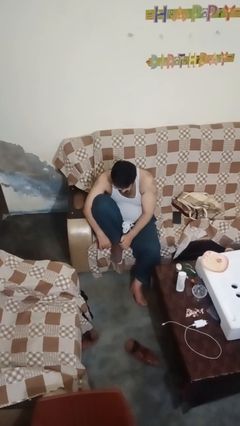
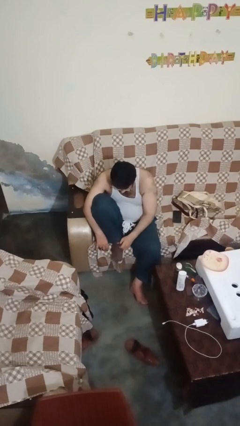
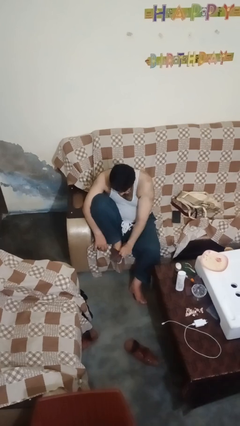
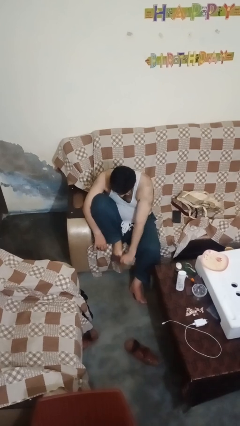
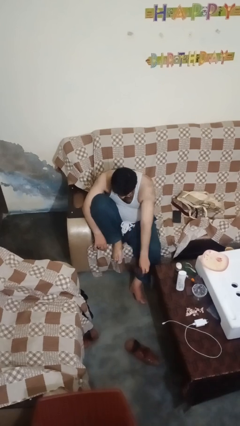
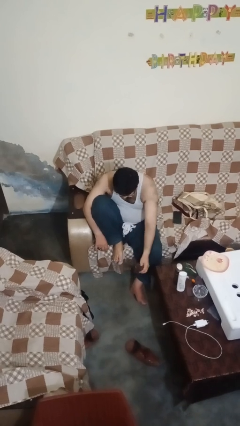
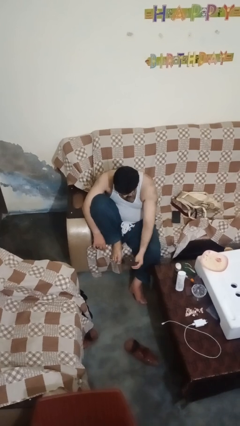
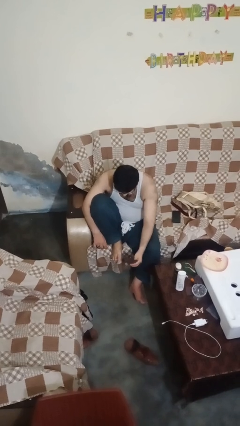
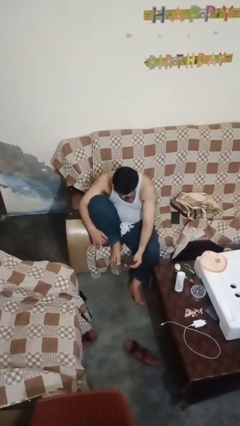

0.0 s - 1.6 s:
person takes off socks

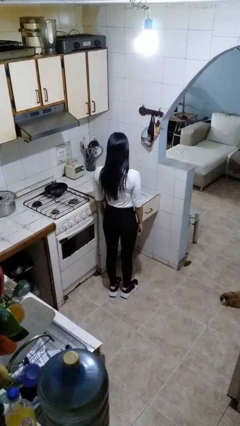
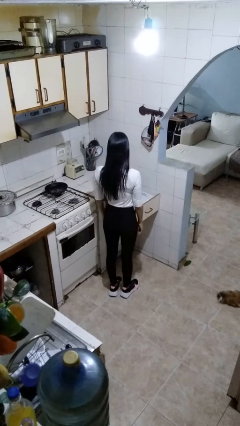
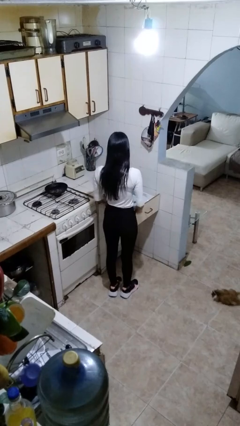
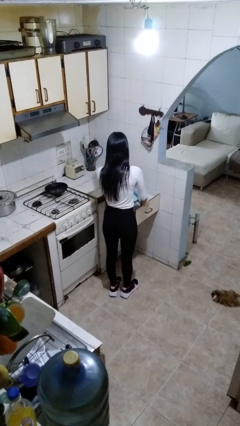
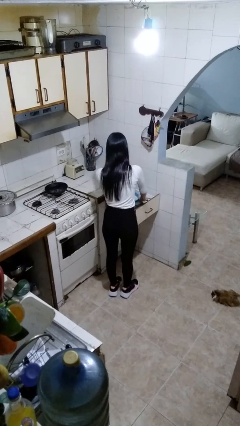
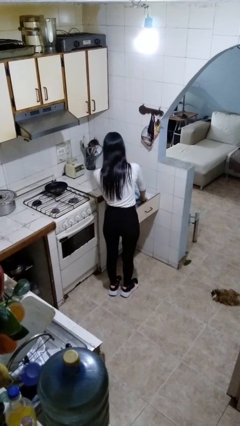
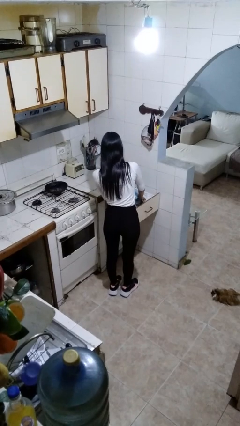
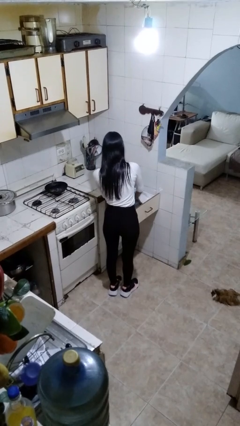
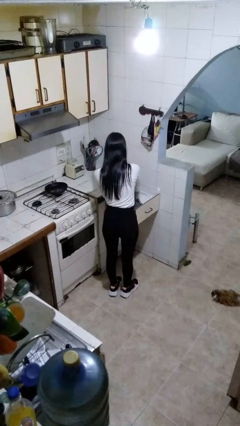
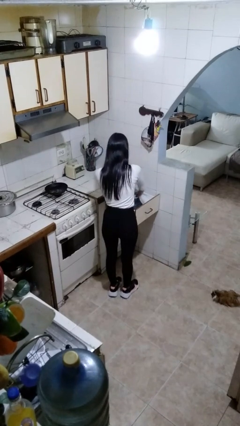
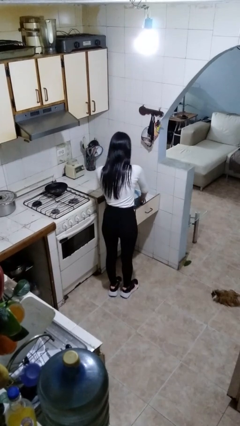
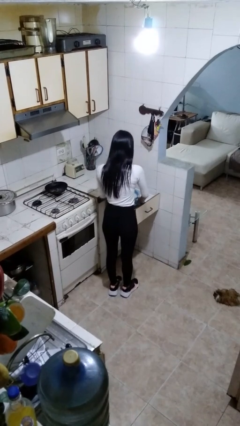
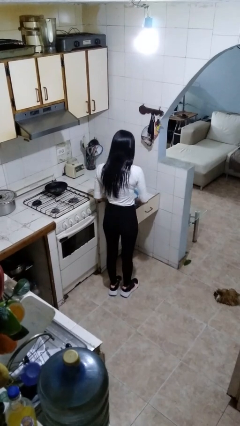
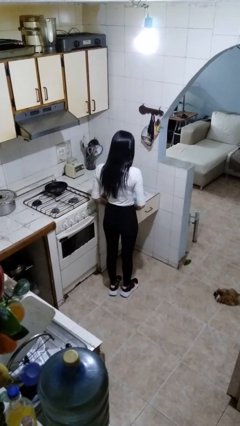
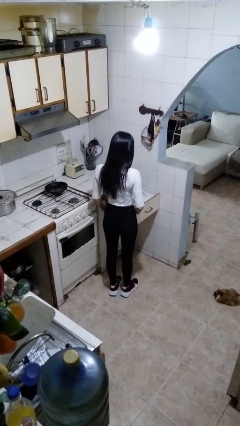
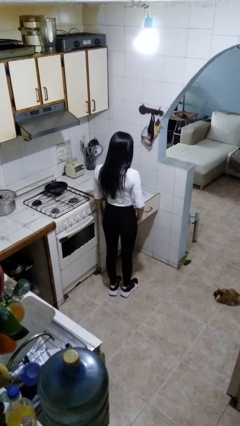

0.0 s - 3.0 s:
person searches in kitchen drawer

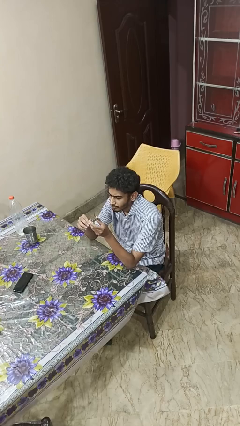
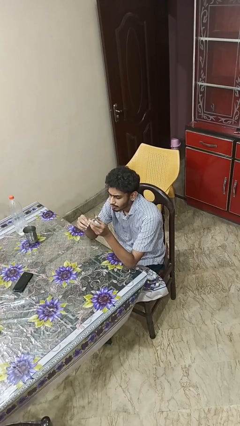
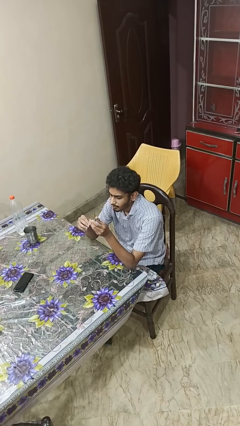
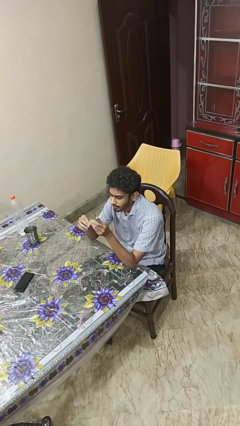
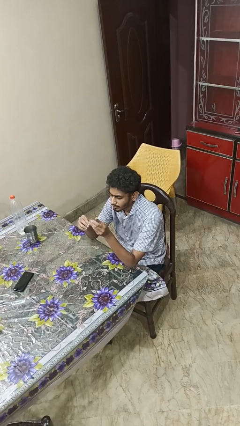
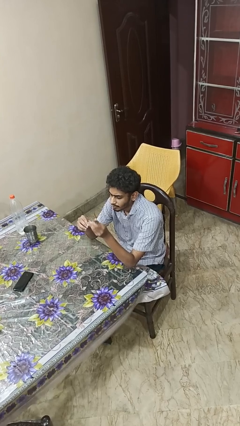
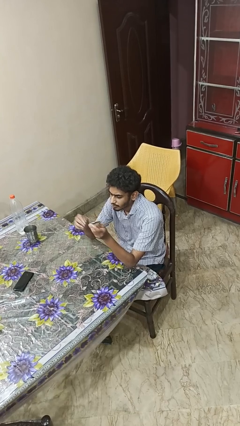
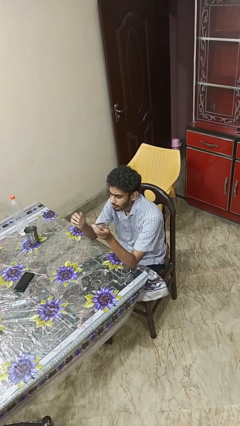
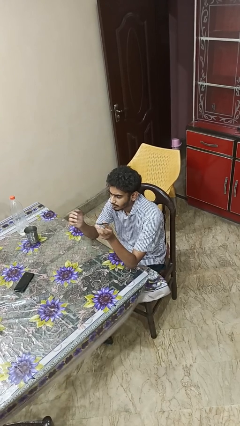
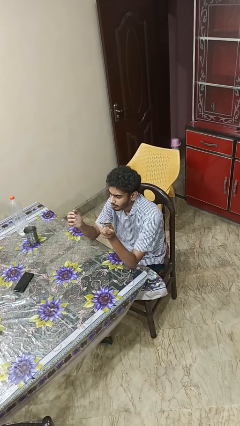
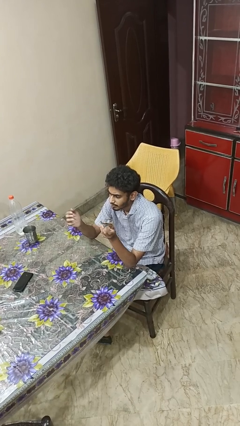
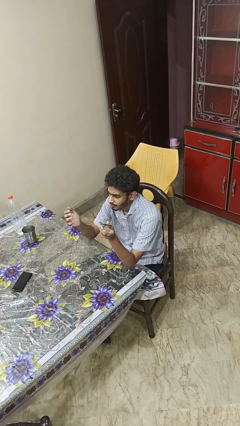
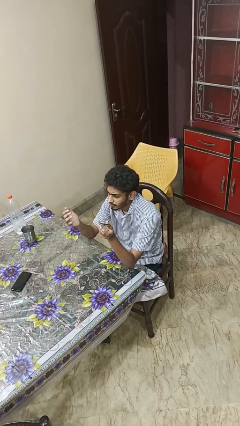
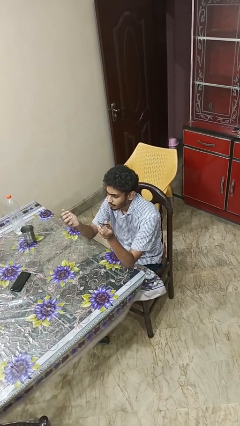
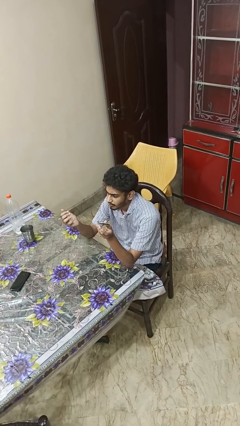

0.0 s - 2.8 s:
person clips fingernails

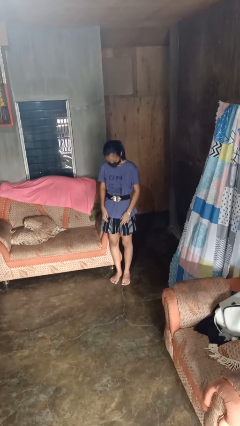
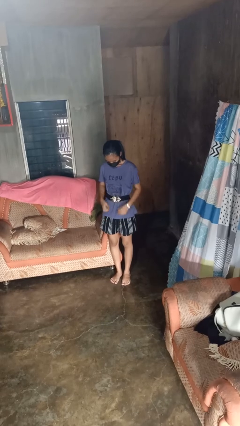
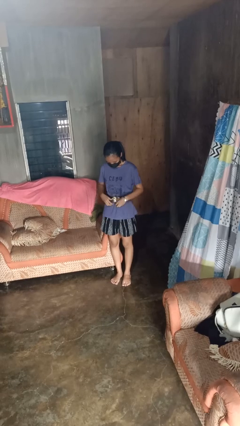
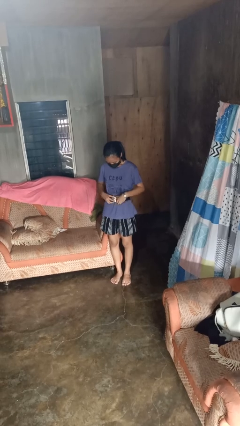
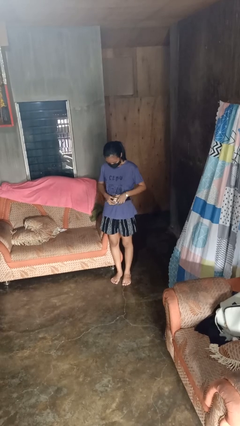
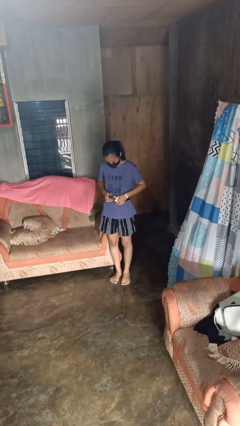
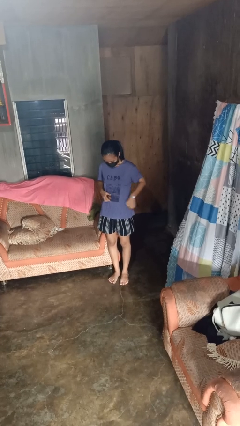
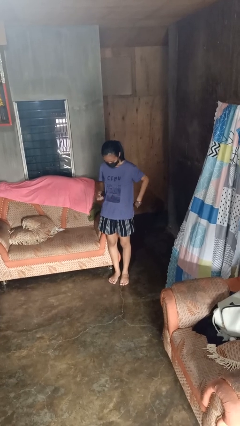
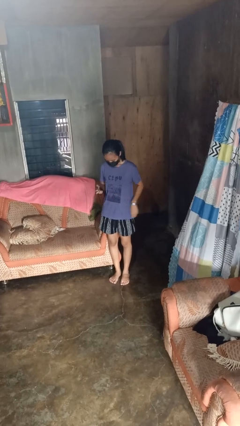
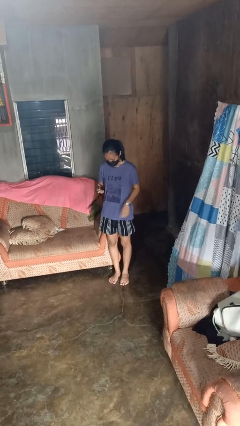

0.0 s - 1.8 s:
person takes off belt

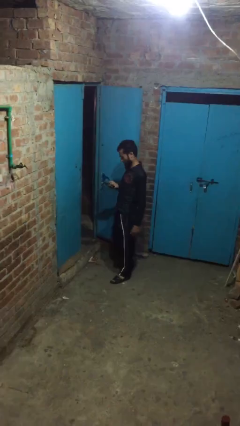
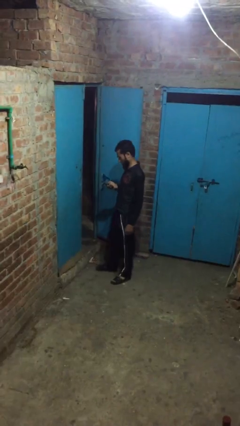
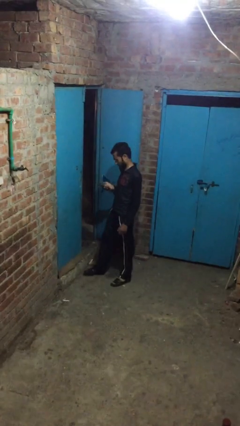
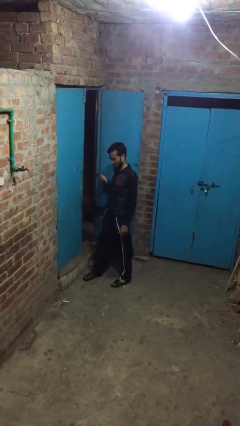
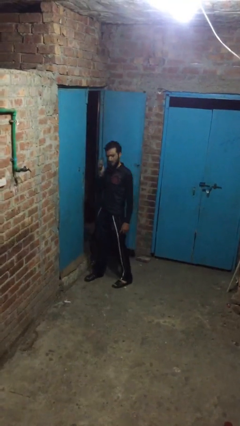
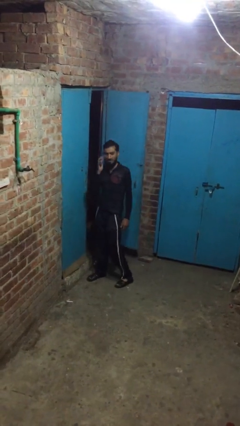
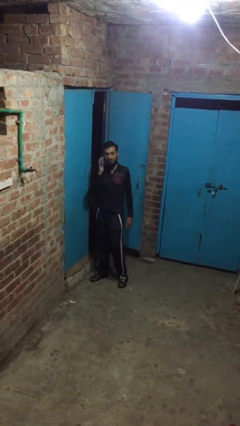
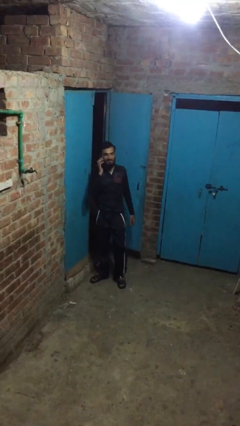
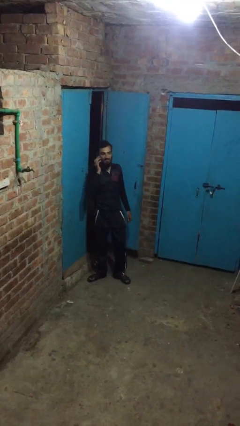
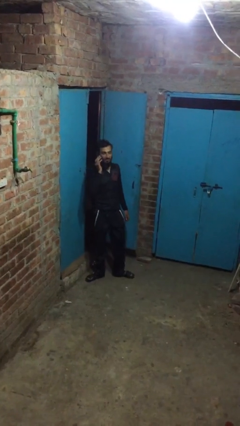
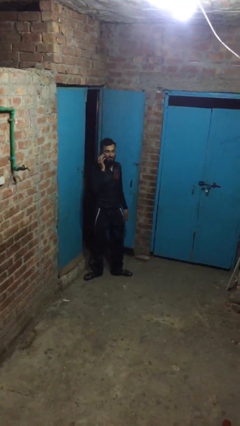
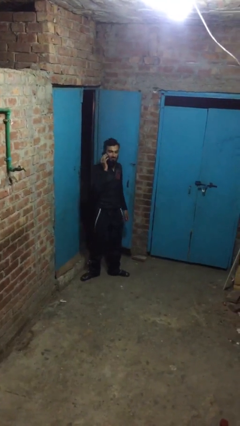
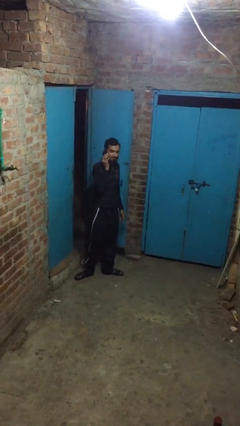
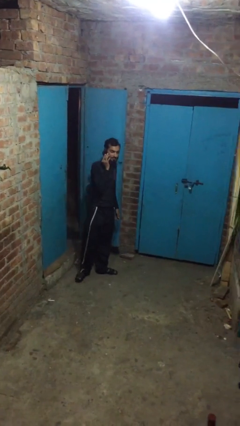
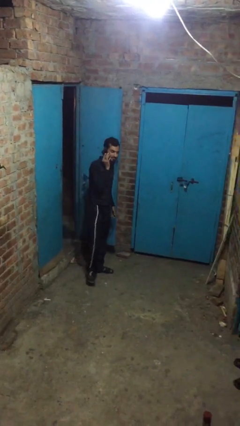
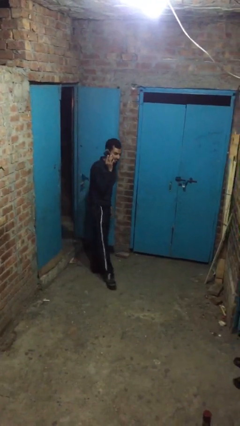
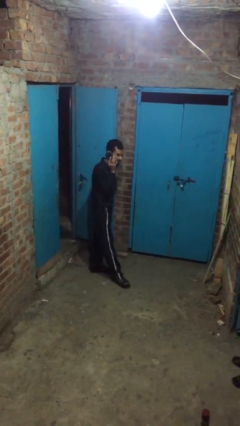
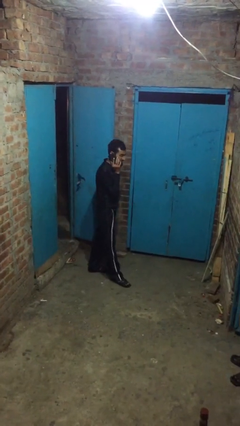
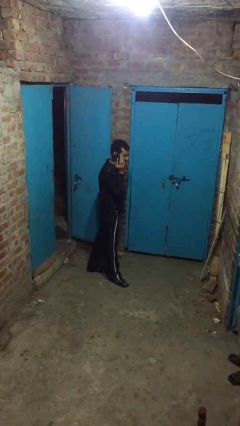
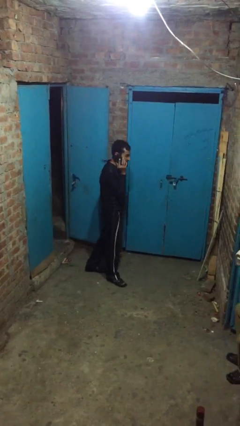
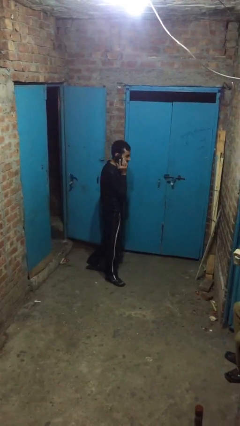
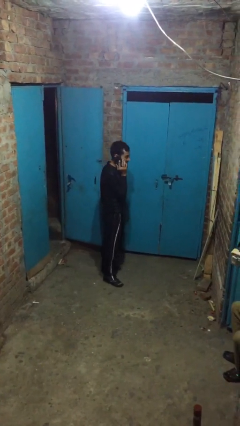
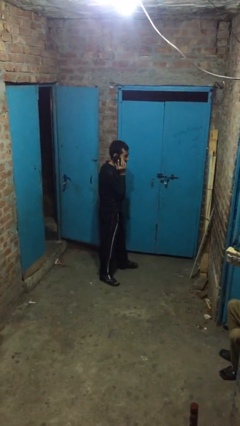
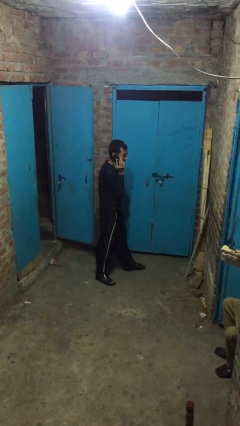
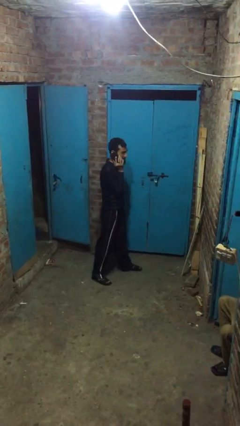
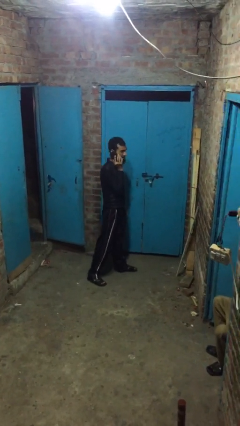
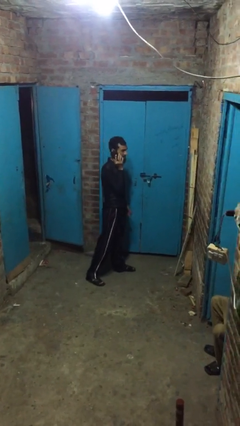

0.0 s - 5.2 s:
person talks on phone

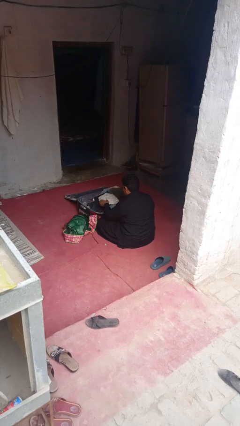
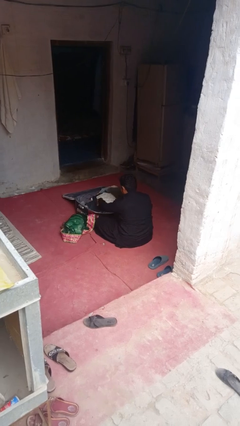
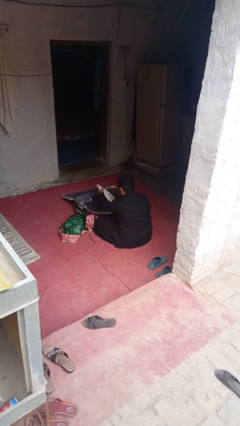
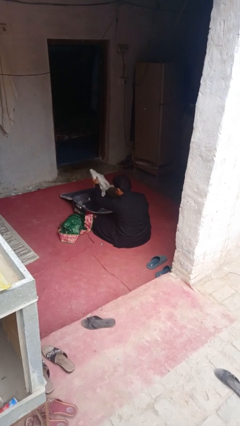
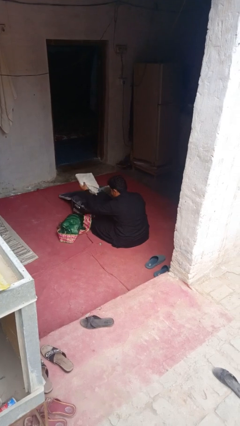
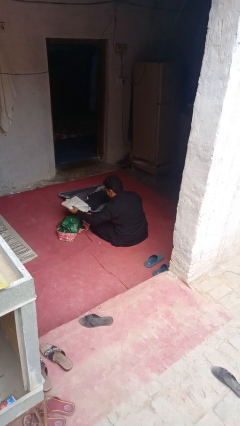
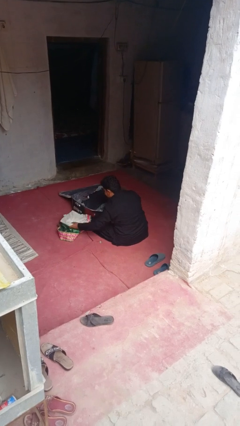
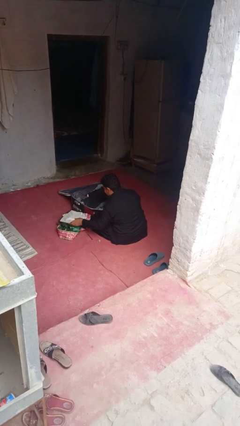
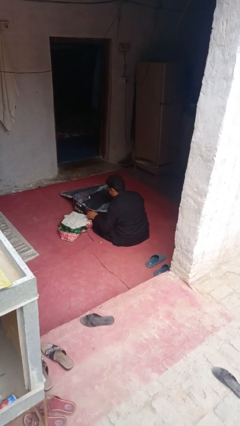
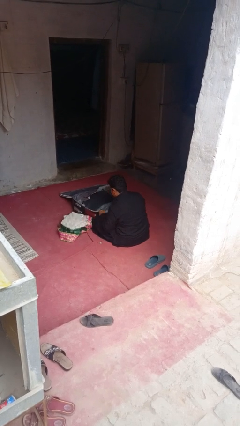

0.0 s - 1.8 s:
person unloads clothes from suitcase

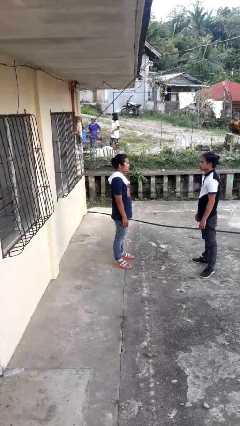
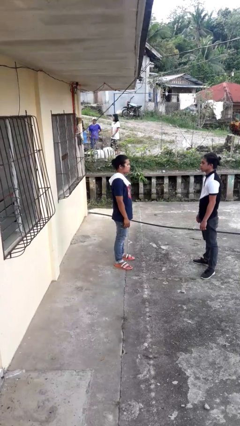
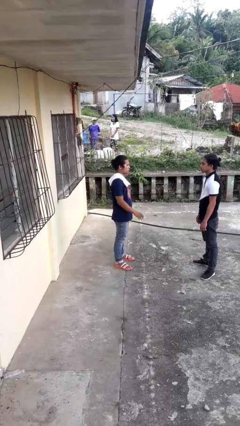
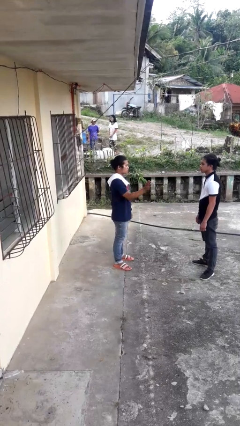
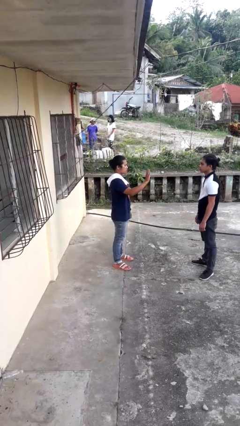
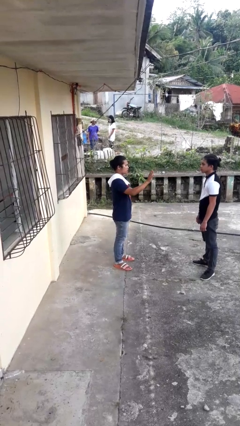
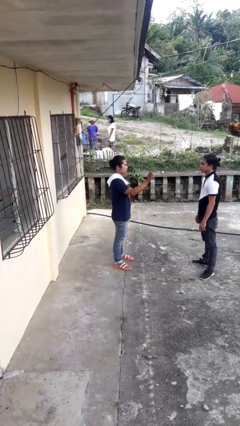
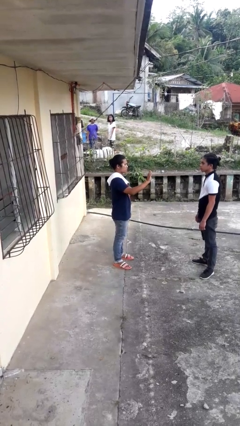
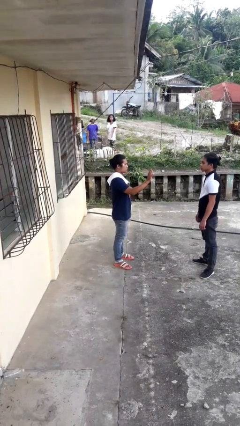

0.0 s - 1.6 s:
person waves at person
